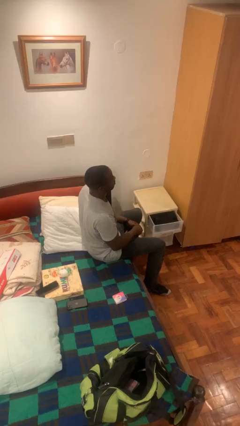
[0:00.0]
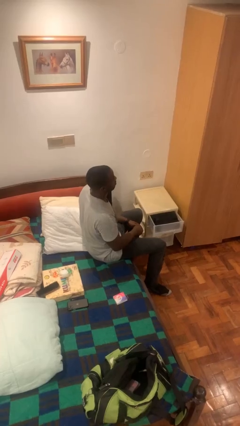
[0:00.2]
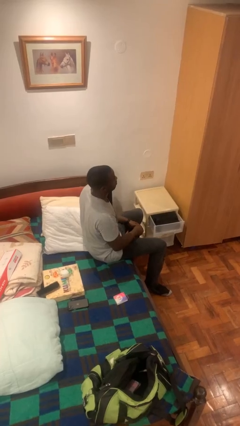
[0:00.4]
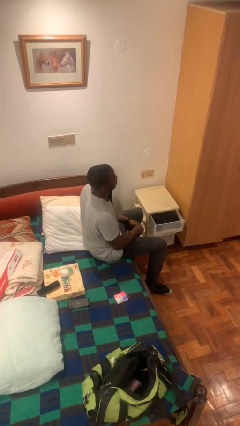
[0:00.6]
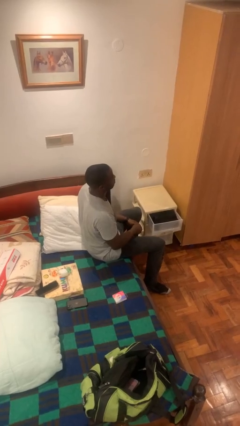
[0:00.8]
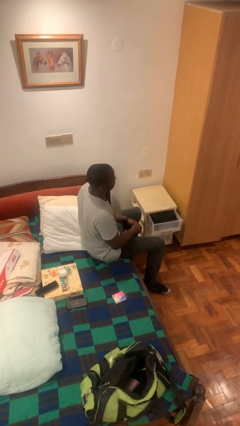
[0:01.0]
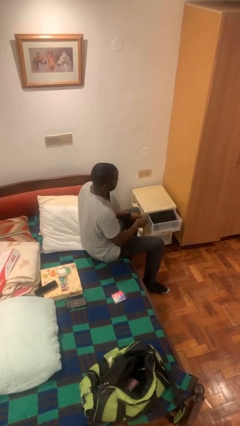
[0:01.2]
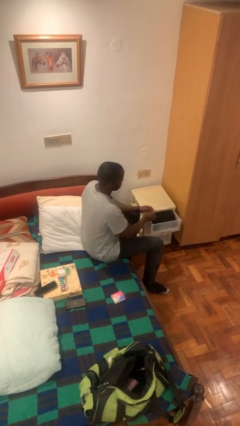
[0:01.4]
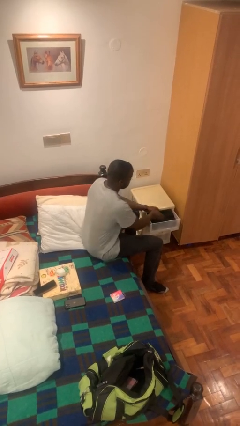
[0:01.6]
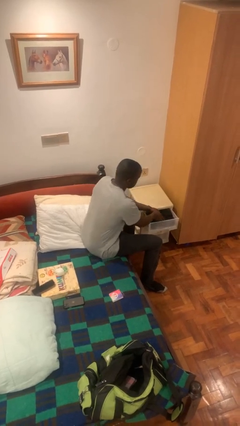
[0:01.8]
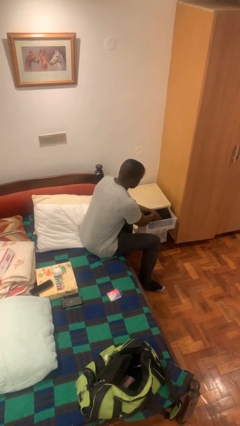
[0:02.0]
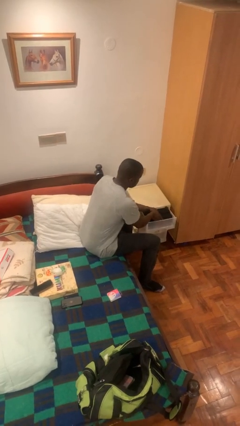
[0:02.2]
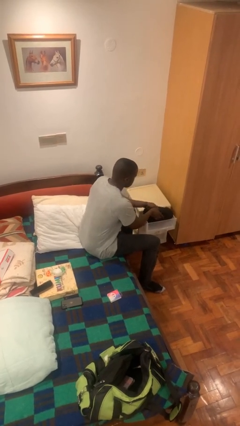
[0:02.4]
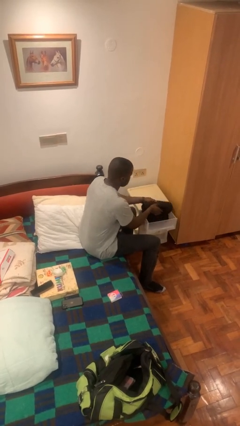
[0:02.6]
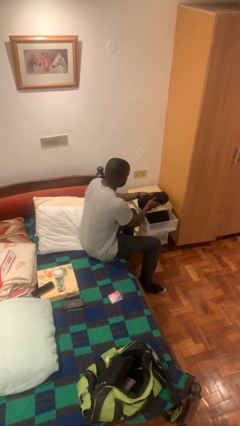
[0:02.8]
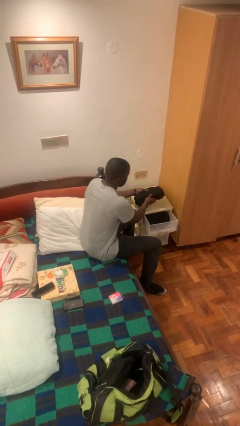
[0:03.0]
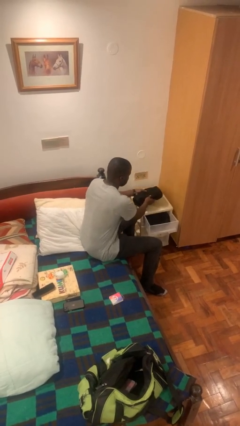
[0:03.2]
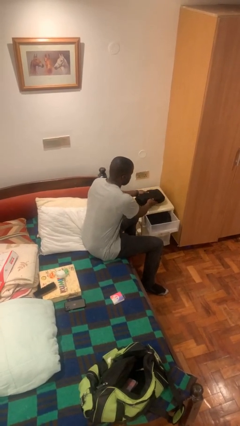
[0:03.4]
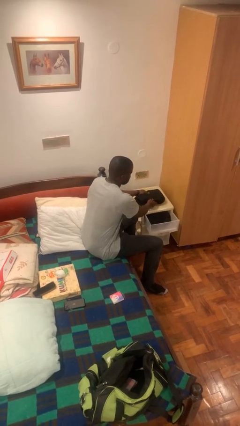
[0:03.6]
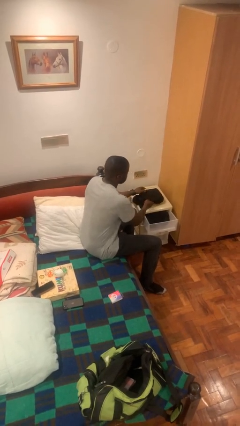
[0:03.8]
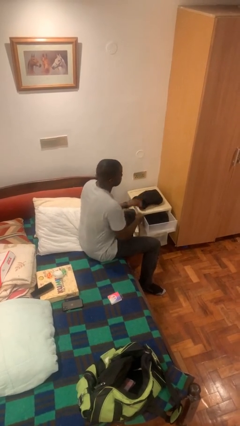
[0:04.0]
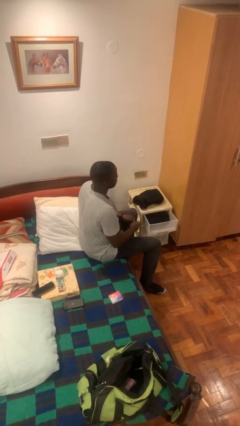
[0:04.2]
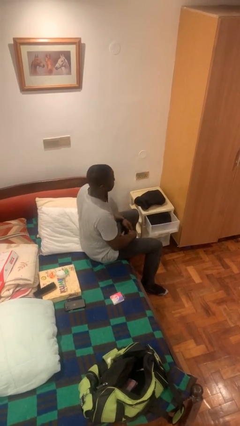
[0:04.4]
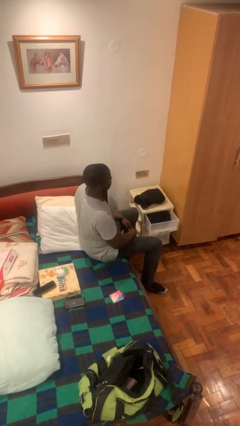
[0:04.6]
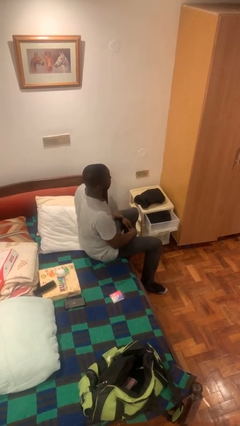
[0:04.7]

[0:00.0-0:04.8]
person takes clothes from dresser

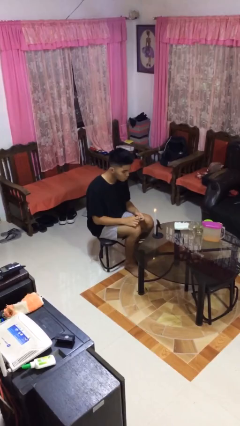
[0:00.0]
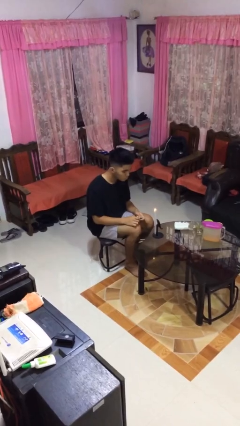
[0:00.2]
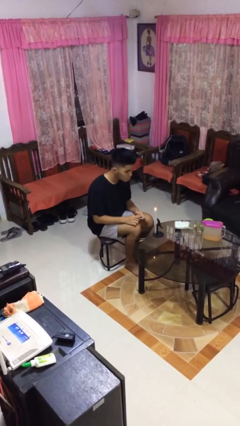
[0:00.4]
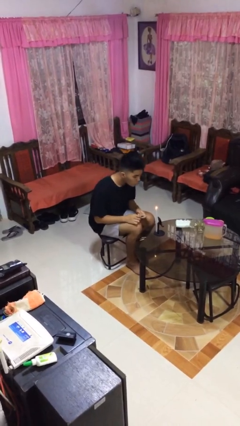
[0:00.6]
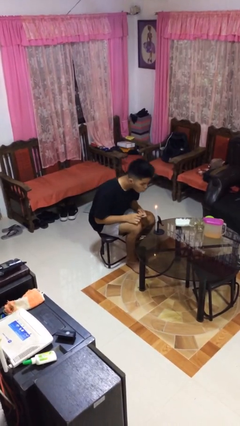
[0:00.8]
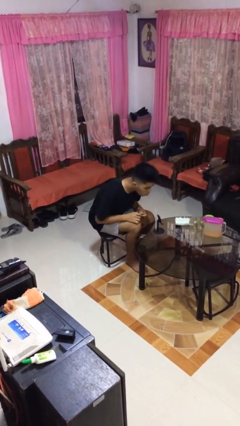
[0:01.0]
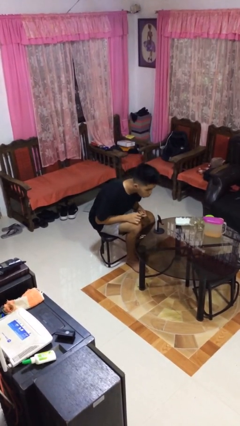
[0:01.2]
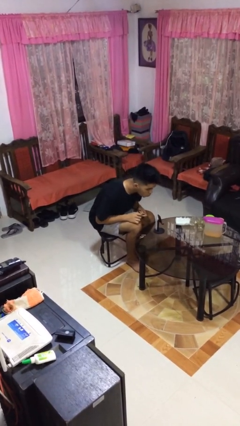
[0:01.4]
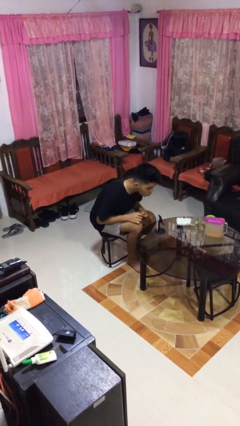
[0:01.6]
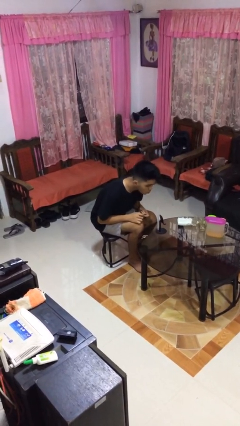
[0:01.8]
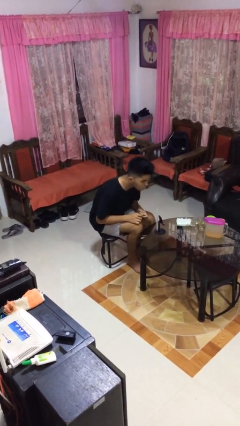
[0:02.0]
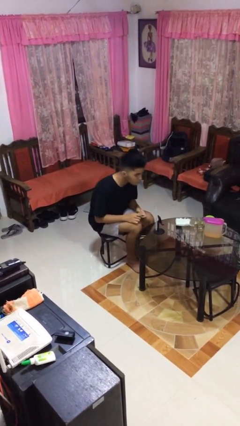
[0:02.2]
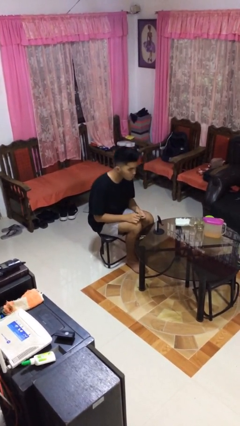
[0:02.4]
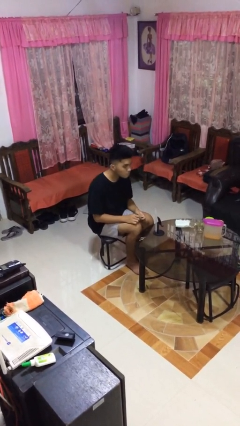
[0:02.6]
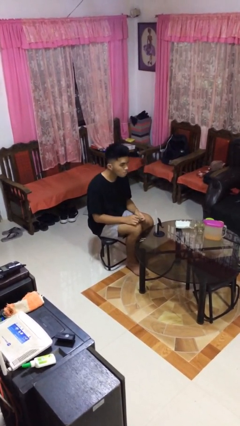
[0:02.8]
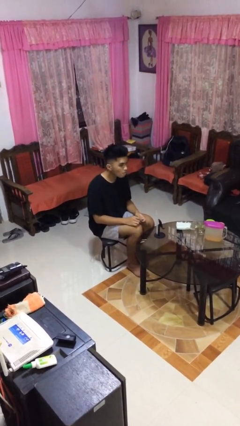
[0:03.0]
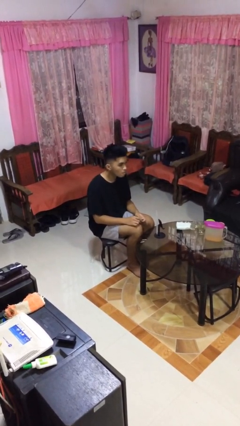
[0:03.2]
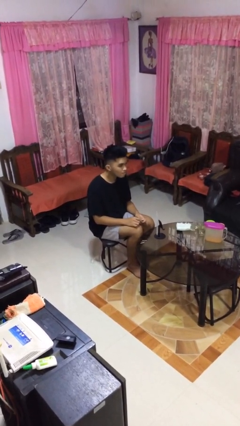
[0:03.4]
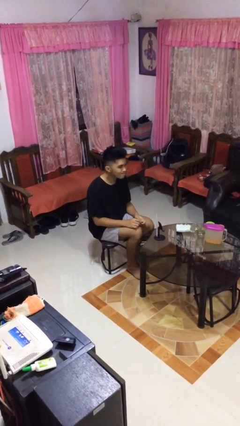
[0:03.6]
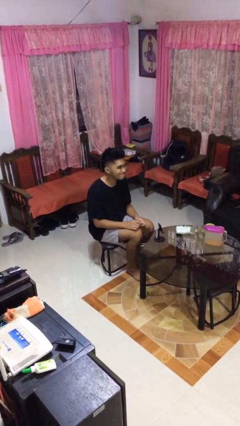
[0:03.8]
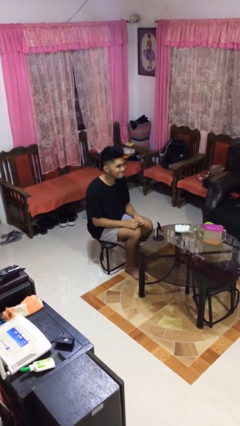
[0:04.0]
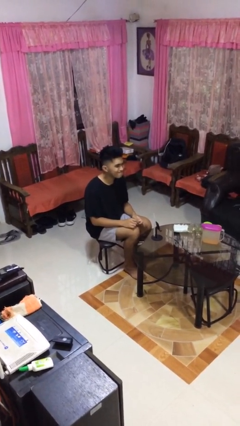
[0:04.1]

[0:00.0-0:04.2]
person extinguishes candle

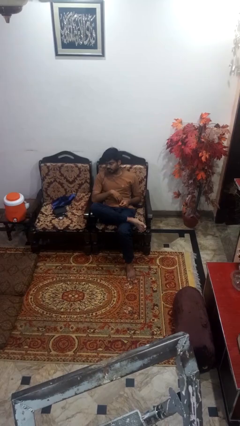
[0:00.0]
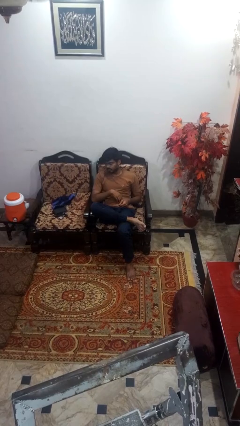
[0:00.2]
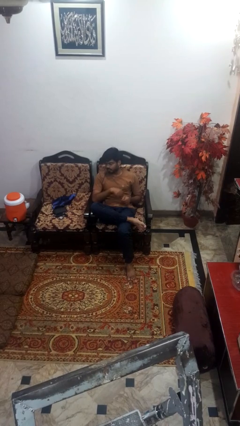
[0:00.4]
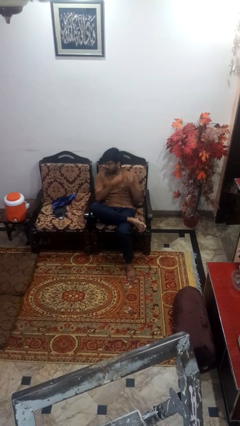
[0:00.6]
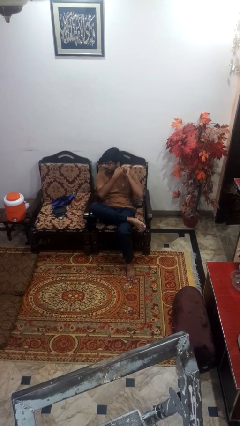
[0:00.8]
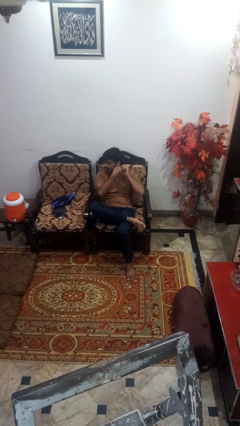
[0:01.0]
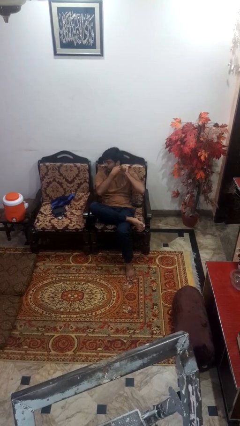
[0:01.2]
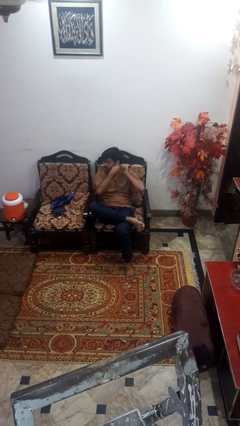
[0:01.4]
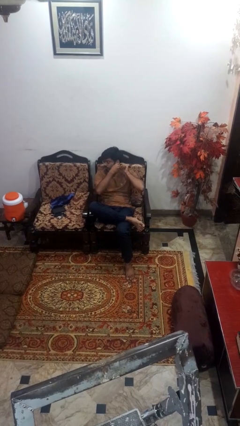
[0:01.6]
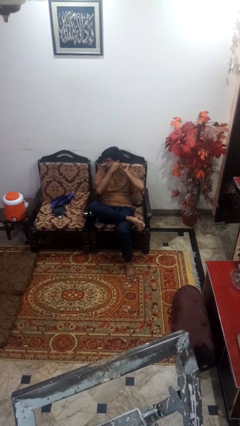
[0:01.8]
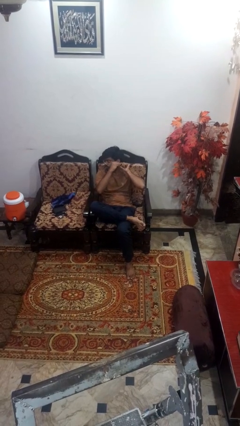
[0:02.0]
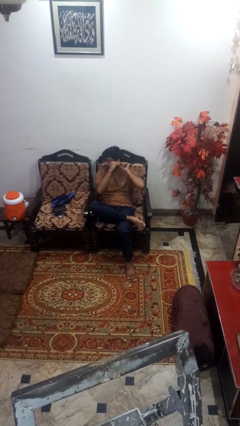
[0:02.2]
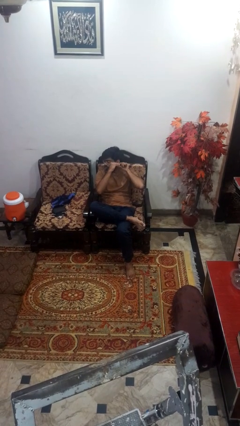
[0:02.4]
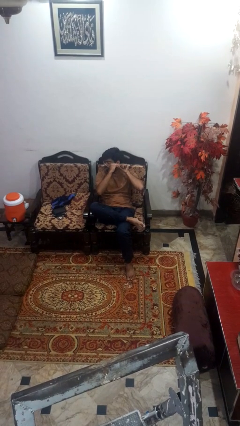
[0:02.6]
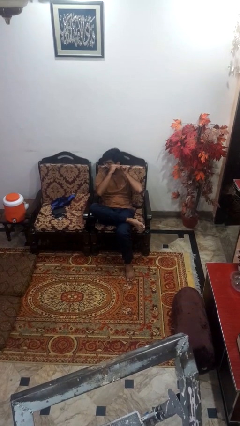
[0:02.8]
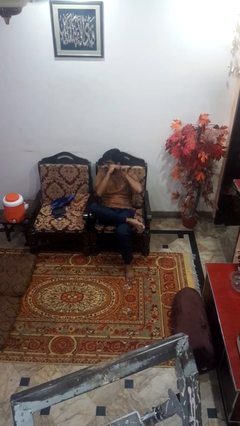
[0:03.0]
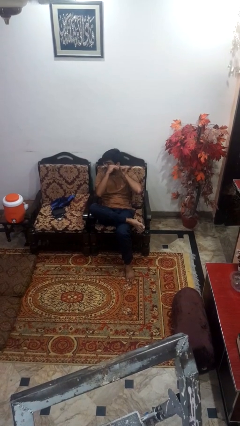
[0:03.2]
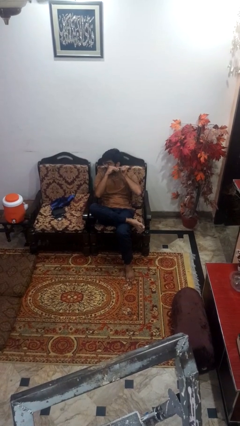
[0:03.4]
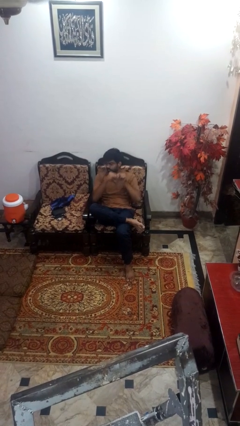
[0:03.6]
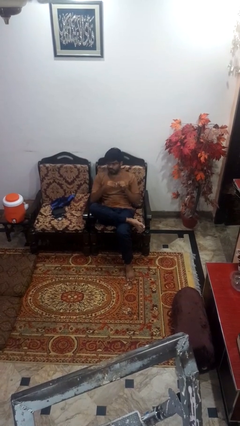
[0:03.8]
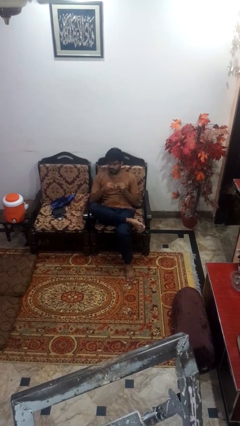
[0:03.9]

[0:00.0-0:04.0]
person takes off earrings

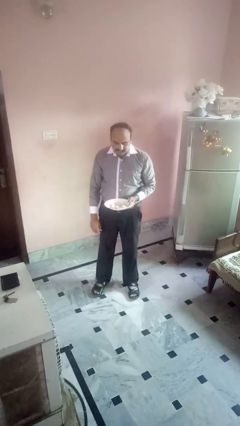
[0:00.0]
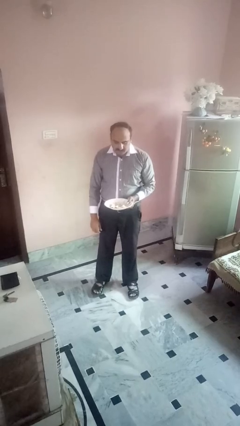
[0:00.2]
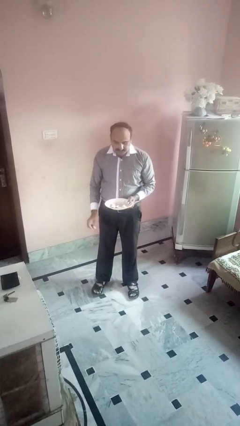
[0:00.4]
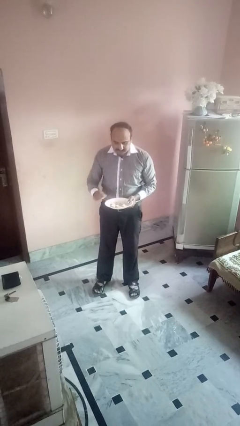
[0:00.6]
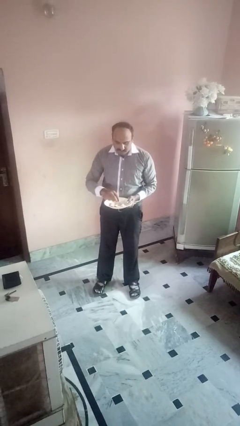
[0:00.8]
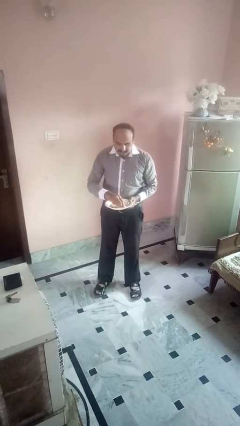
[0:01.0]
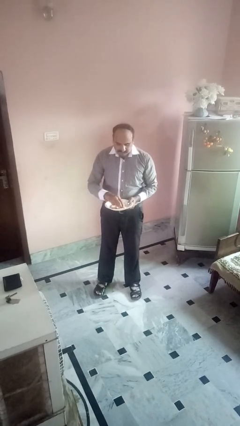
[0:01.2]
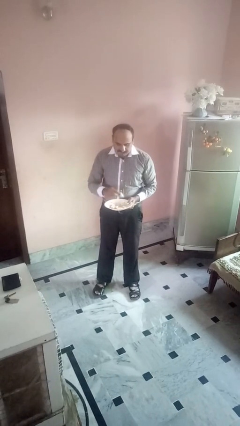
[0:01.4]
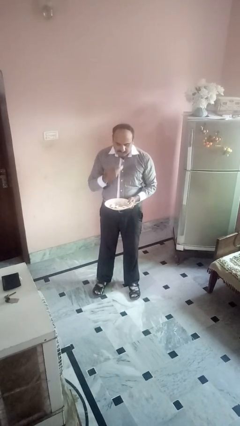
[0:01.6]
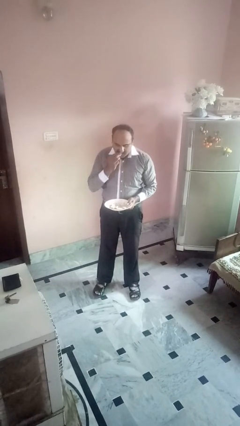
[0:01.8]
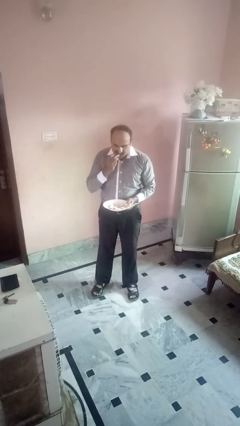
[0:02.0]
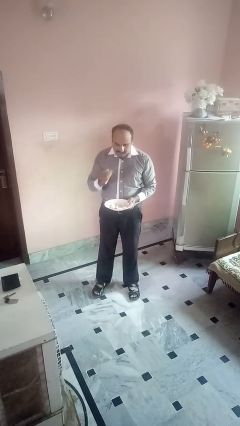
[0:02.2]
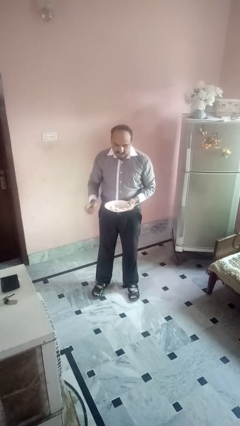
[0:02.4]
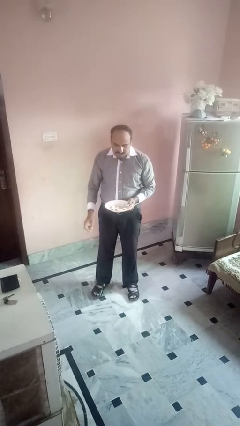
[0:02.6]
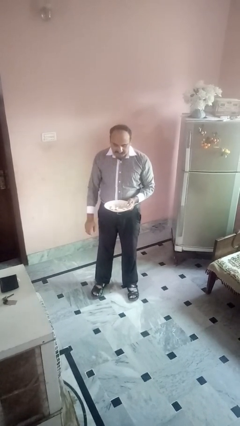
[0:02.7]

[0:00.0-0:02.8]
person eats with hands

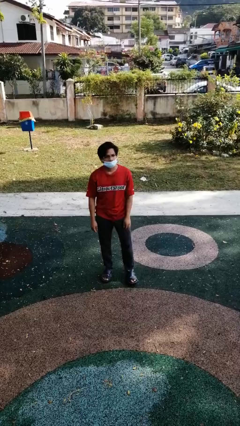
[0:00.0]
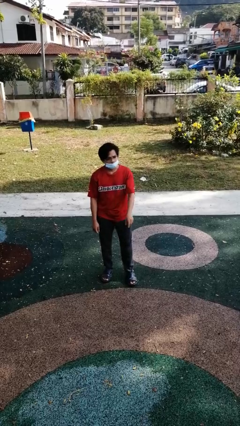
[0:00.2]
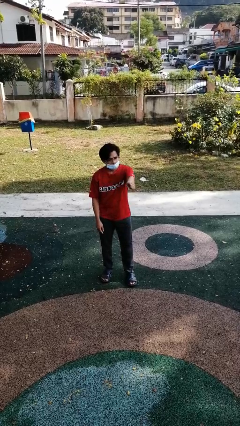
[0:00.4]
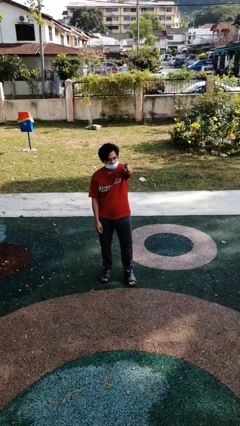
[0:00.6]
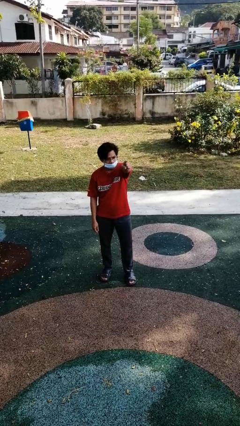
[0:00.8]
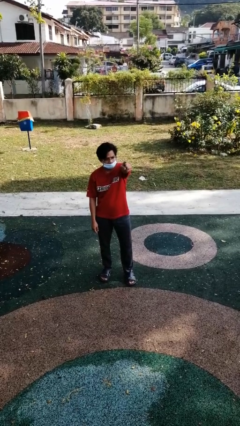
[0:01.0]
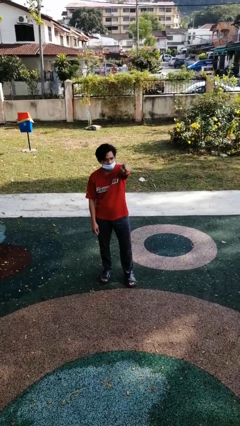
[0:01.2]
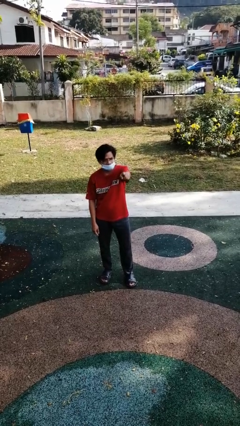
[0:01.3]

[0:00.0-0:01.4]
person points at person

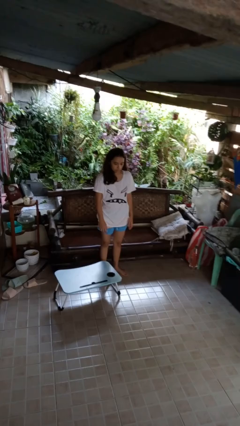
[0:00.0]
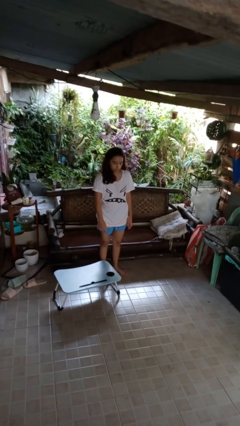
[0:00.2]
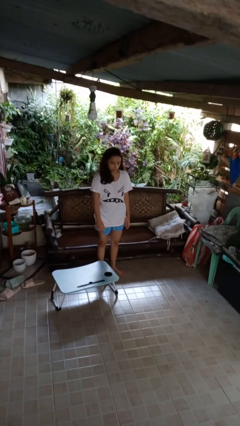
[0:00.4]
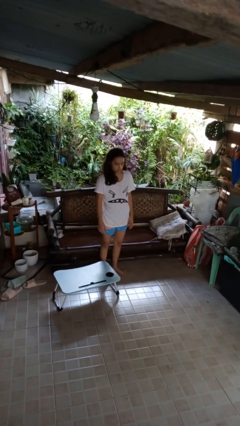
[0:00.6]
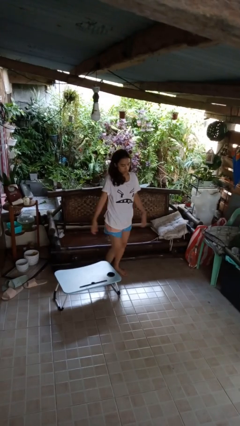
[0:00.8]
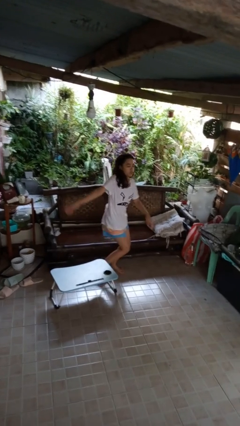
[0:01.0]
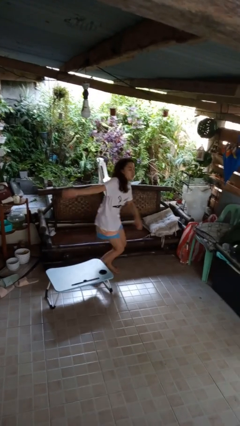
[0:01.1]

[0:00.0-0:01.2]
person trips on object on floor
